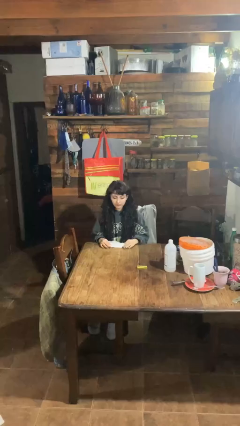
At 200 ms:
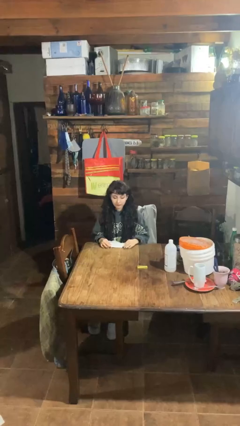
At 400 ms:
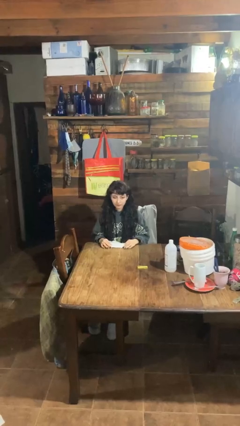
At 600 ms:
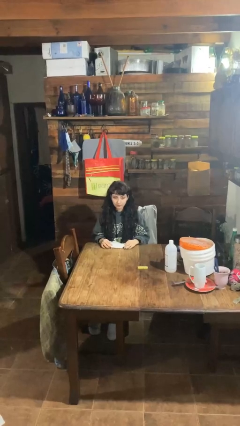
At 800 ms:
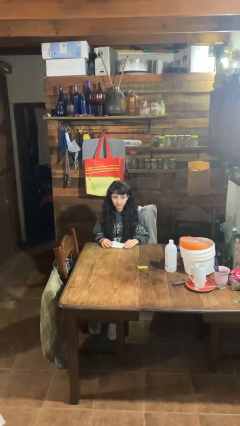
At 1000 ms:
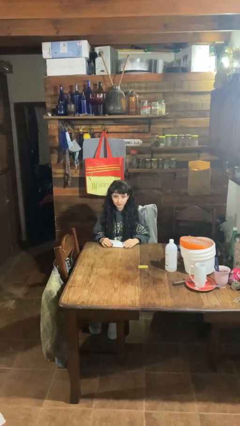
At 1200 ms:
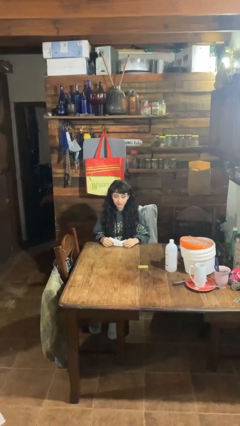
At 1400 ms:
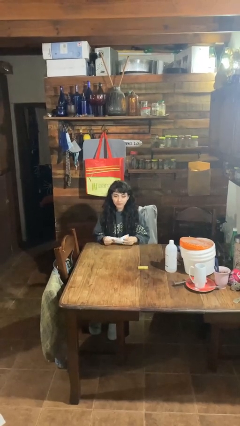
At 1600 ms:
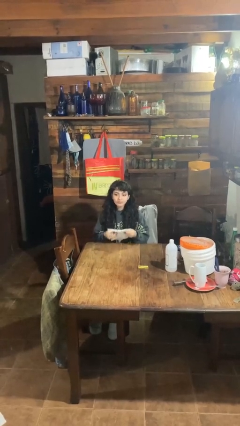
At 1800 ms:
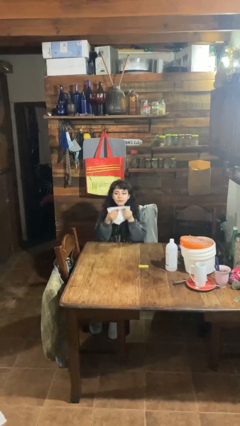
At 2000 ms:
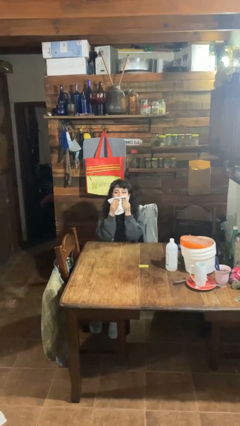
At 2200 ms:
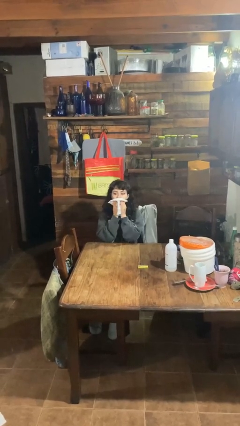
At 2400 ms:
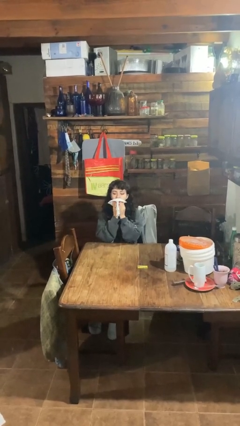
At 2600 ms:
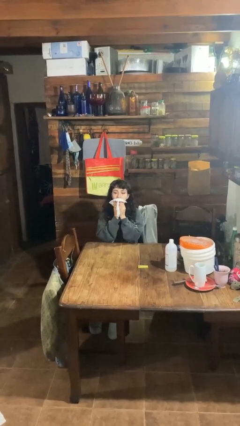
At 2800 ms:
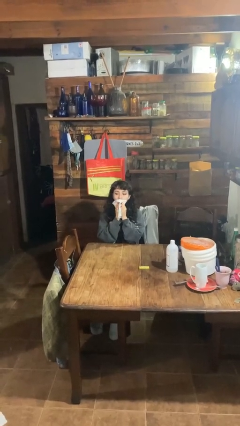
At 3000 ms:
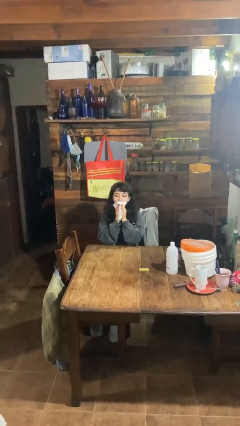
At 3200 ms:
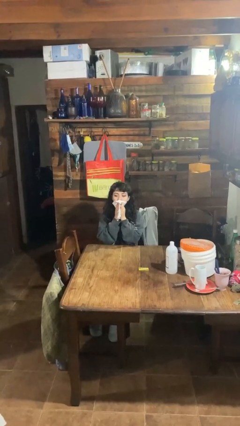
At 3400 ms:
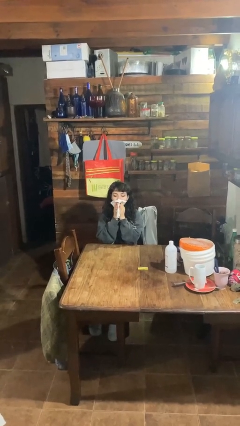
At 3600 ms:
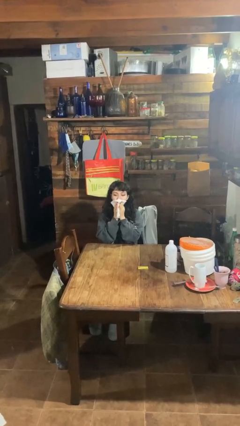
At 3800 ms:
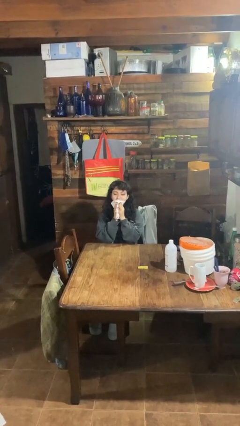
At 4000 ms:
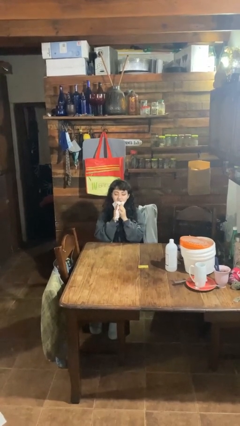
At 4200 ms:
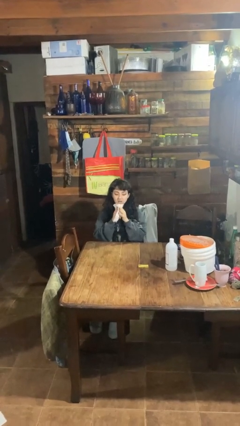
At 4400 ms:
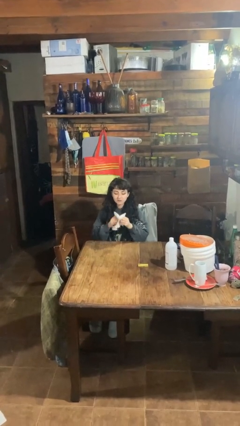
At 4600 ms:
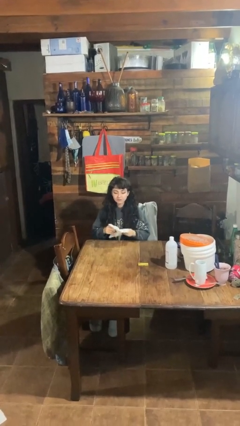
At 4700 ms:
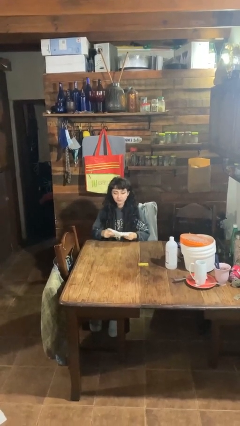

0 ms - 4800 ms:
person wipes mouth with napkin

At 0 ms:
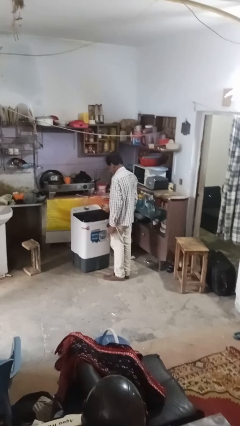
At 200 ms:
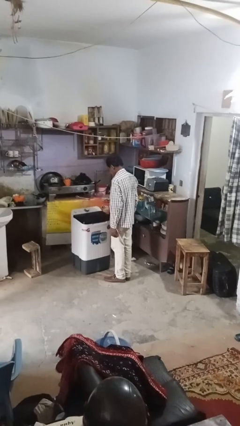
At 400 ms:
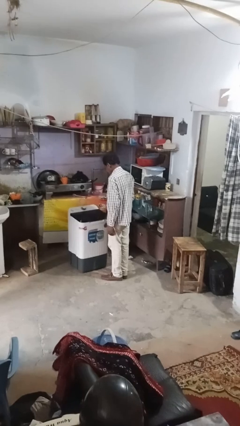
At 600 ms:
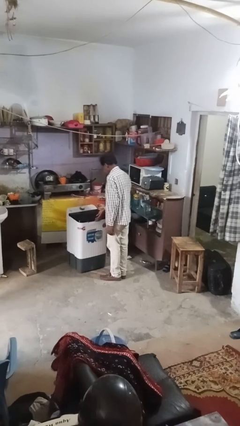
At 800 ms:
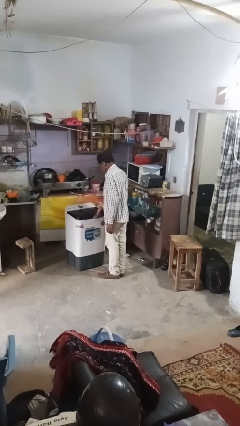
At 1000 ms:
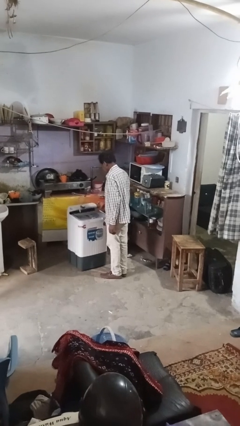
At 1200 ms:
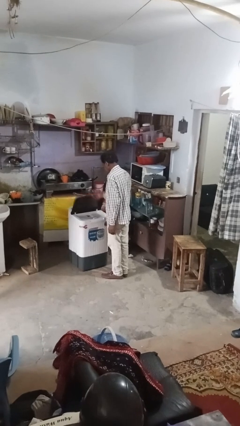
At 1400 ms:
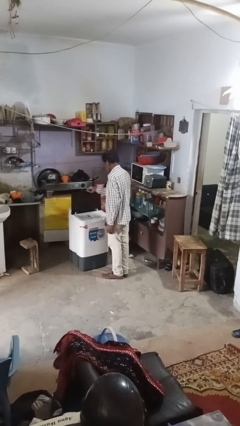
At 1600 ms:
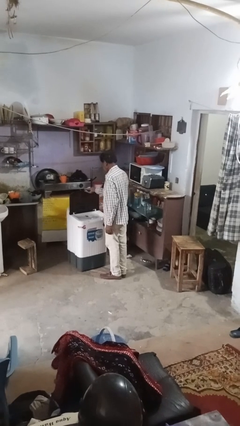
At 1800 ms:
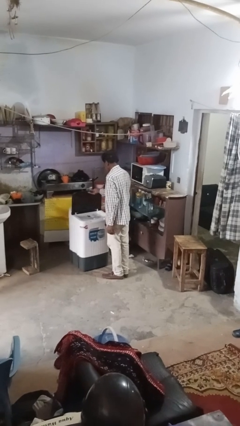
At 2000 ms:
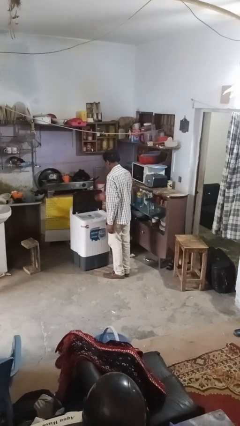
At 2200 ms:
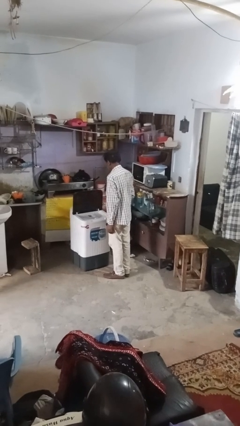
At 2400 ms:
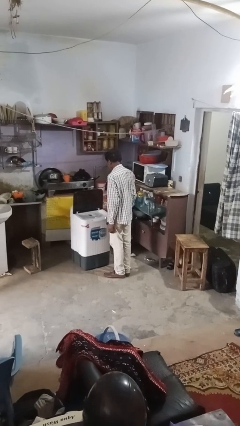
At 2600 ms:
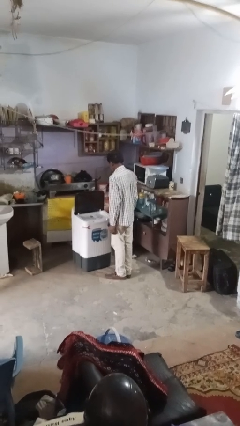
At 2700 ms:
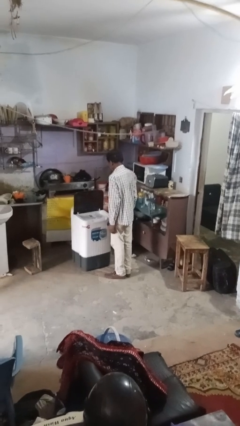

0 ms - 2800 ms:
person opens clothes washer

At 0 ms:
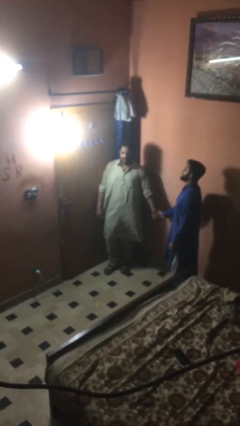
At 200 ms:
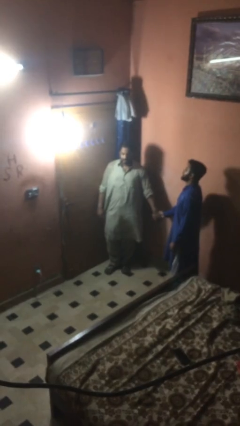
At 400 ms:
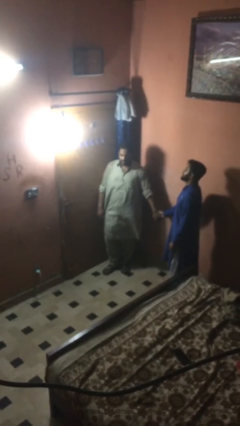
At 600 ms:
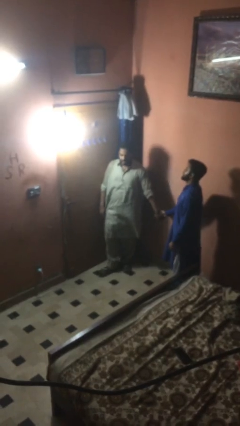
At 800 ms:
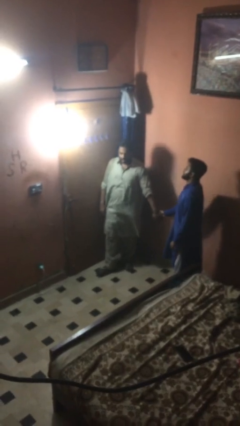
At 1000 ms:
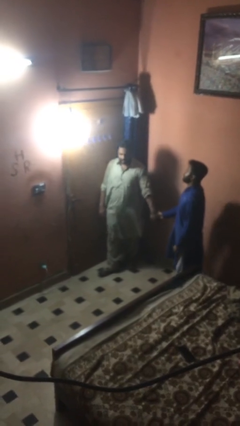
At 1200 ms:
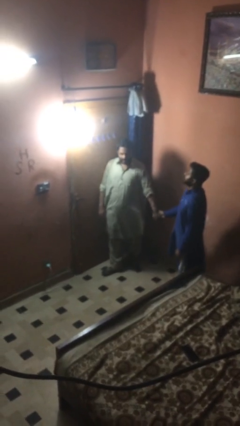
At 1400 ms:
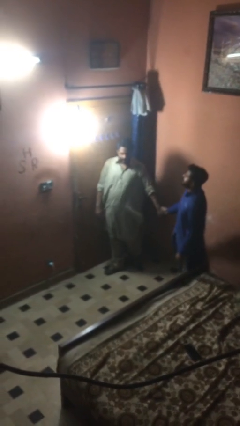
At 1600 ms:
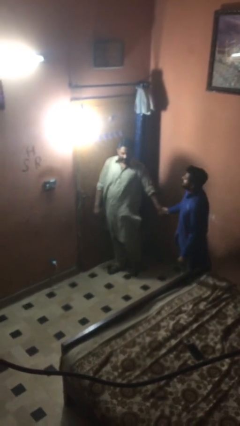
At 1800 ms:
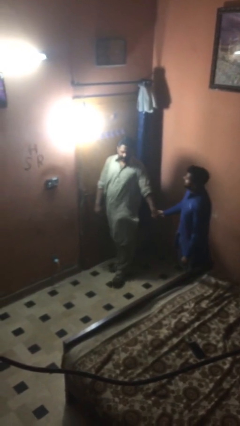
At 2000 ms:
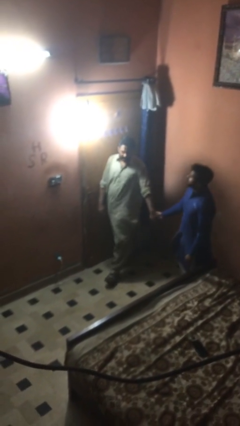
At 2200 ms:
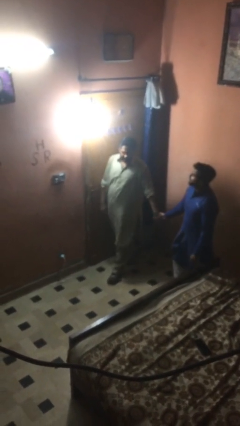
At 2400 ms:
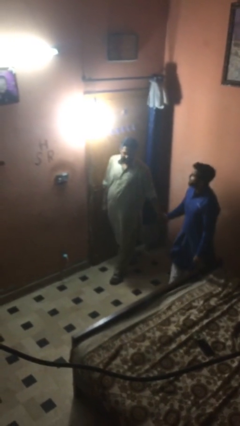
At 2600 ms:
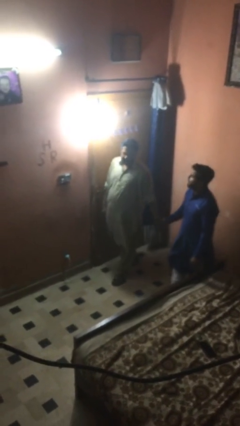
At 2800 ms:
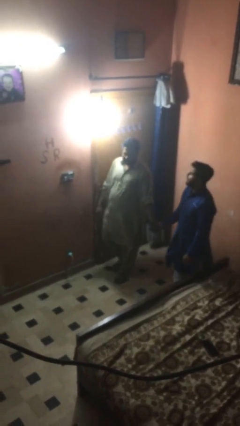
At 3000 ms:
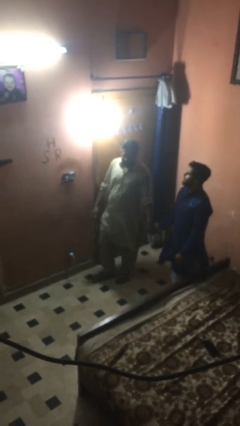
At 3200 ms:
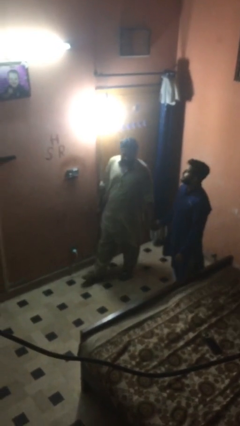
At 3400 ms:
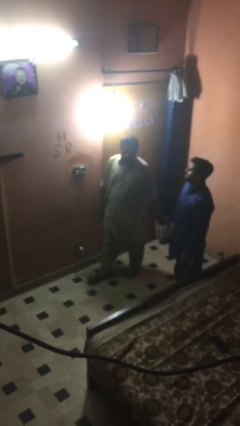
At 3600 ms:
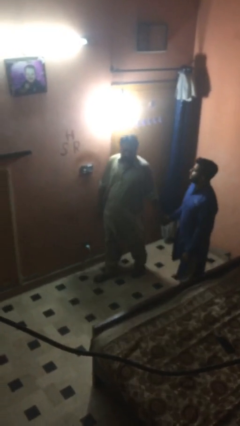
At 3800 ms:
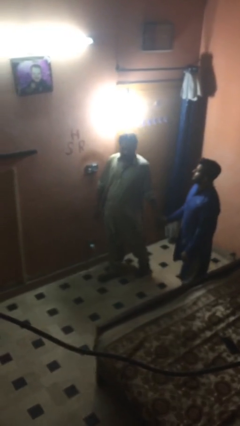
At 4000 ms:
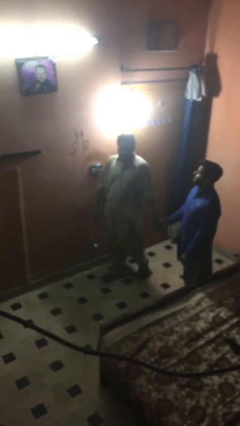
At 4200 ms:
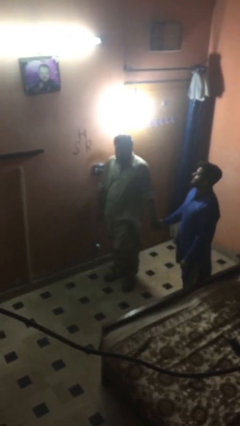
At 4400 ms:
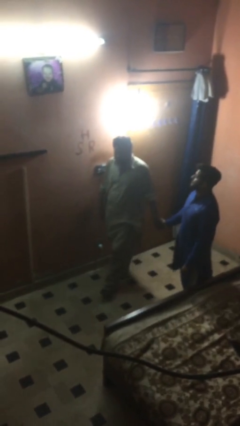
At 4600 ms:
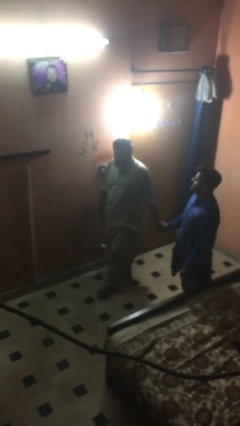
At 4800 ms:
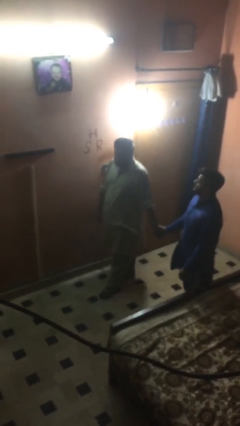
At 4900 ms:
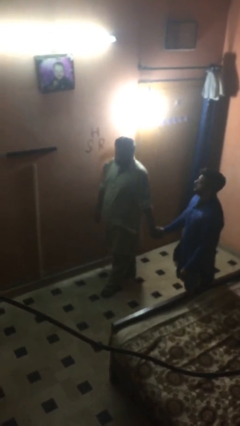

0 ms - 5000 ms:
person holds hand

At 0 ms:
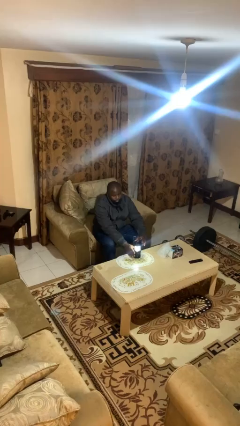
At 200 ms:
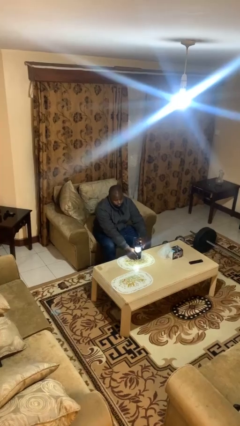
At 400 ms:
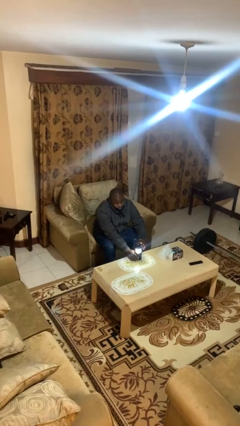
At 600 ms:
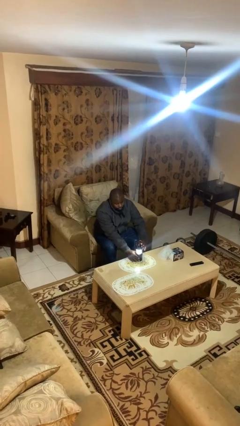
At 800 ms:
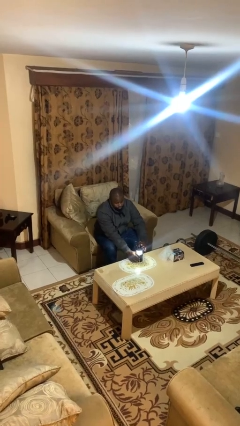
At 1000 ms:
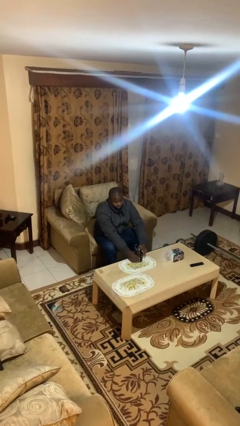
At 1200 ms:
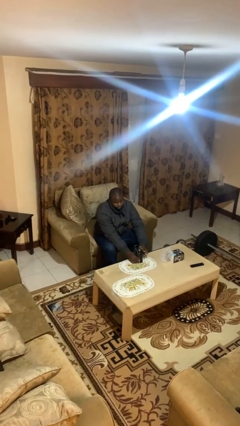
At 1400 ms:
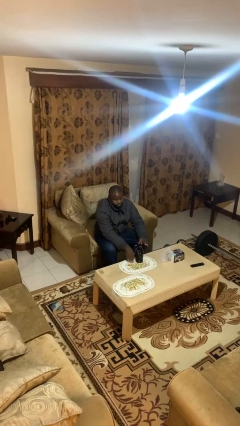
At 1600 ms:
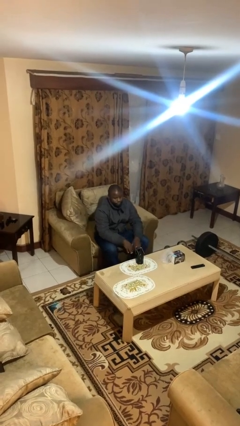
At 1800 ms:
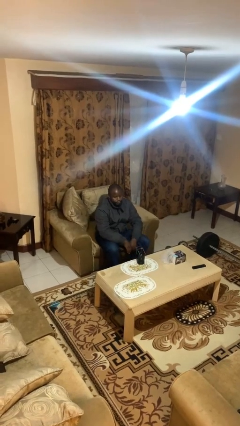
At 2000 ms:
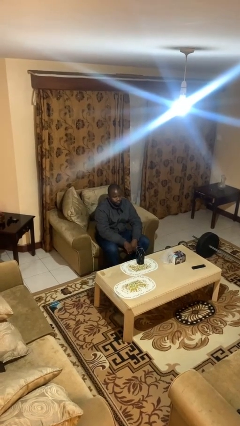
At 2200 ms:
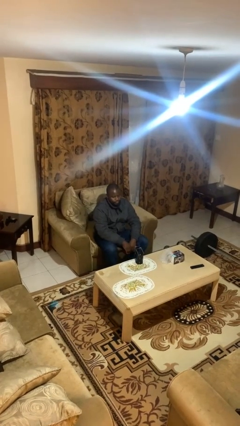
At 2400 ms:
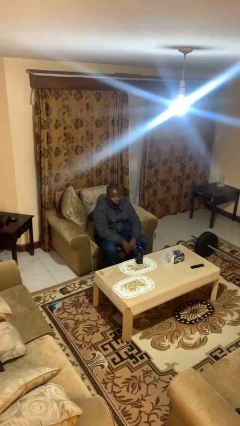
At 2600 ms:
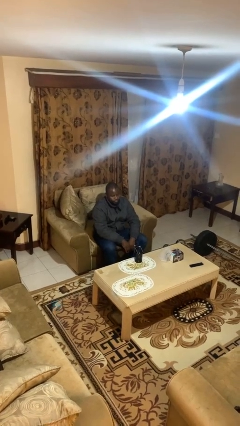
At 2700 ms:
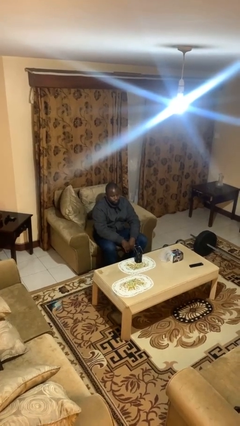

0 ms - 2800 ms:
person turns off lamp

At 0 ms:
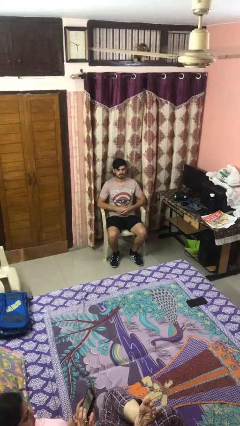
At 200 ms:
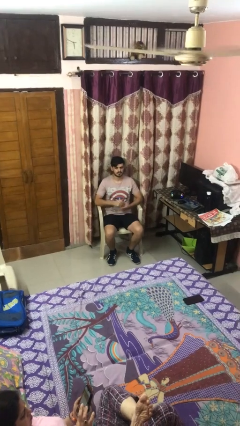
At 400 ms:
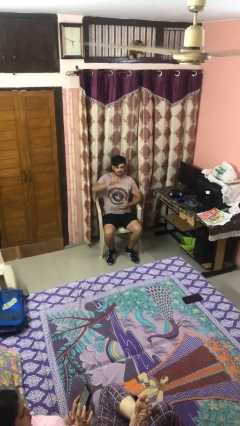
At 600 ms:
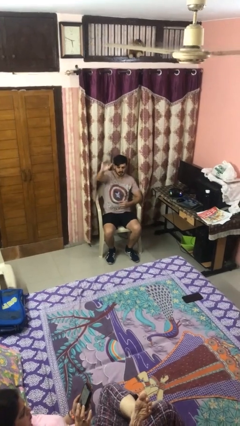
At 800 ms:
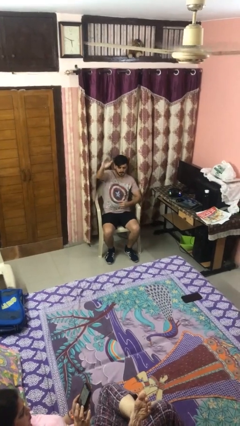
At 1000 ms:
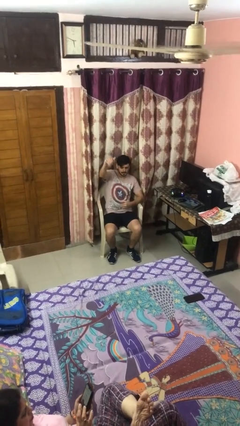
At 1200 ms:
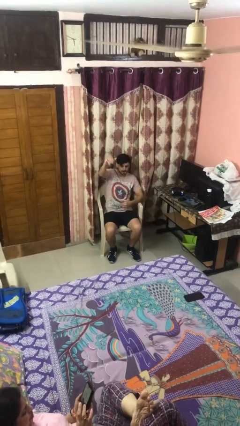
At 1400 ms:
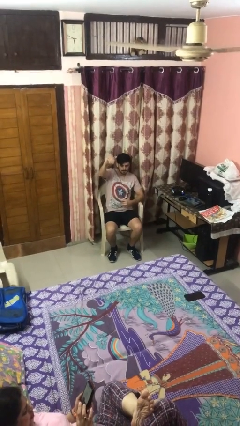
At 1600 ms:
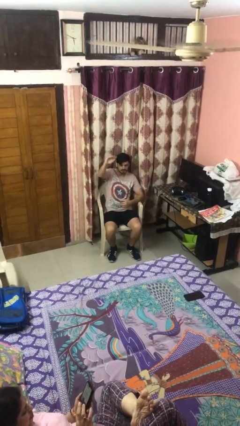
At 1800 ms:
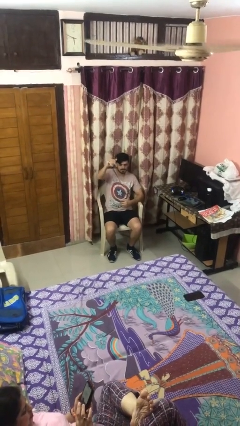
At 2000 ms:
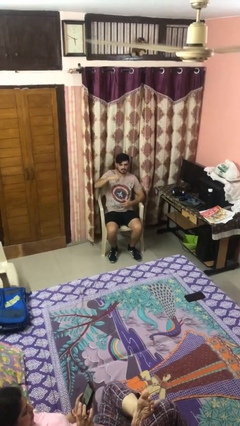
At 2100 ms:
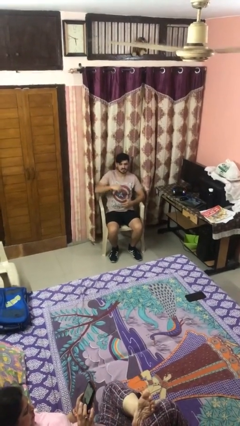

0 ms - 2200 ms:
person gestures come here
